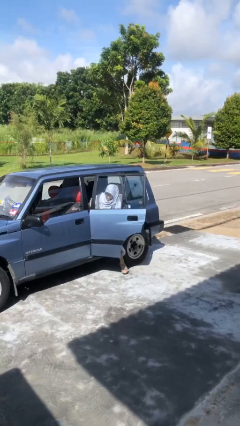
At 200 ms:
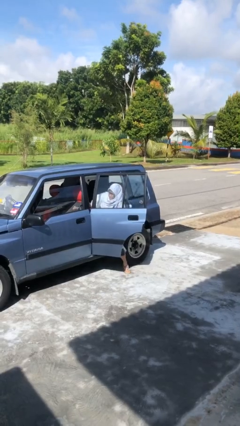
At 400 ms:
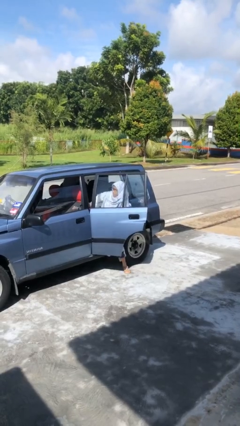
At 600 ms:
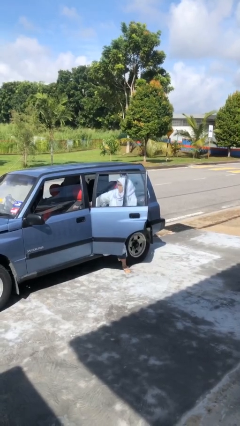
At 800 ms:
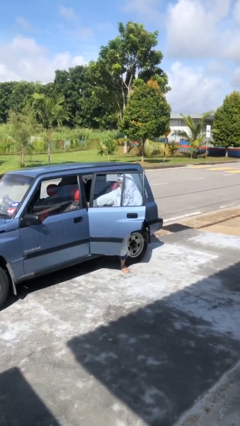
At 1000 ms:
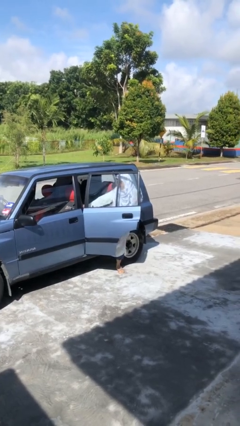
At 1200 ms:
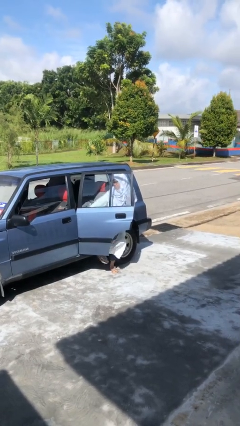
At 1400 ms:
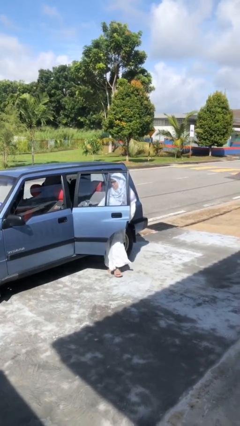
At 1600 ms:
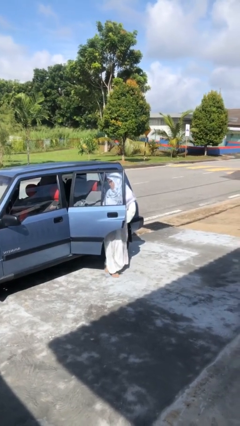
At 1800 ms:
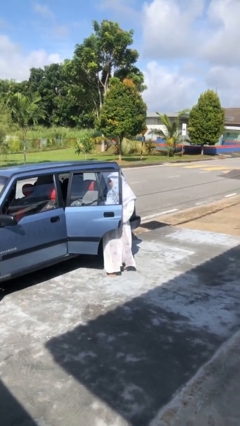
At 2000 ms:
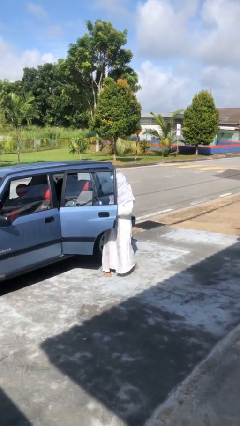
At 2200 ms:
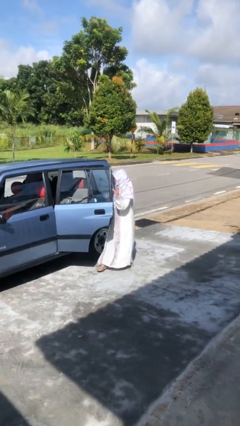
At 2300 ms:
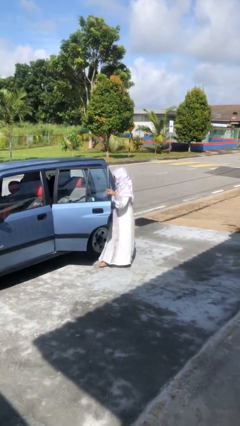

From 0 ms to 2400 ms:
person exits car

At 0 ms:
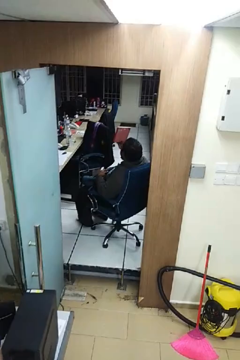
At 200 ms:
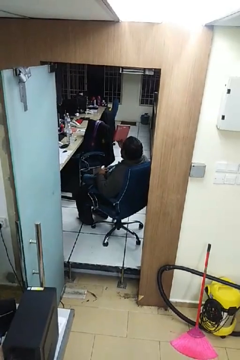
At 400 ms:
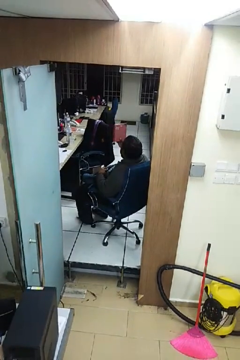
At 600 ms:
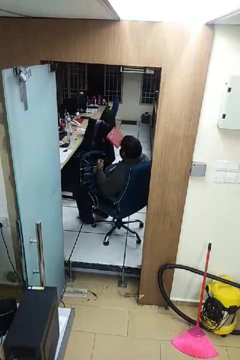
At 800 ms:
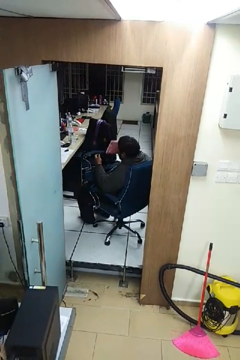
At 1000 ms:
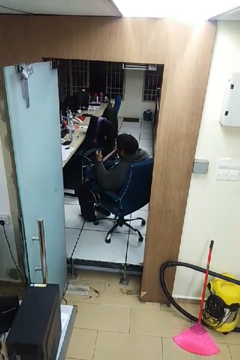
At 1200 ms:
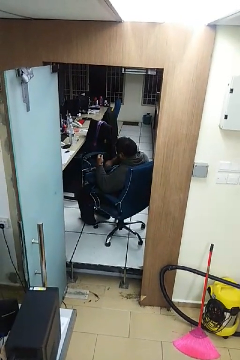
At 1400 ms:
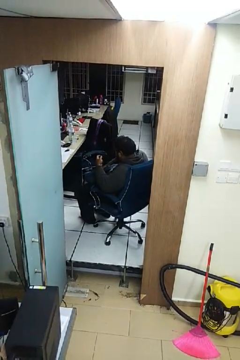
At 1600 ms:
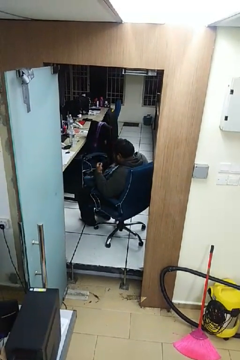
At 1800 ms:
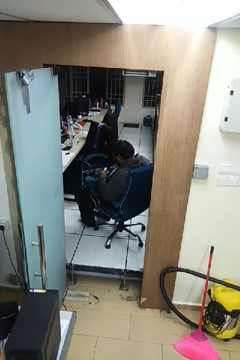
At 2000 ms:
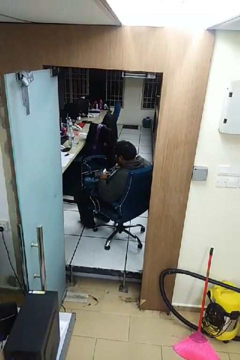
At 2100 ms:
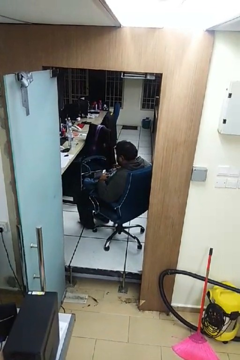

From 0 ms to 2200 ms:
person puts object into backpack

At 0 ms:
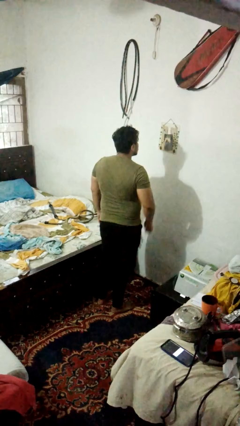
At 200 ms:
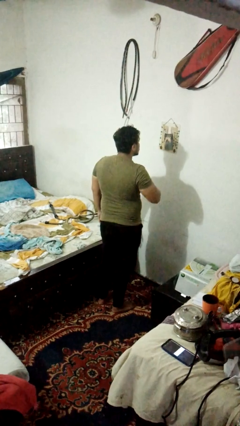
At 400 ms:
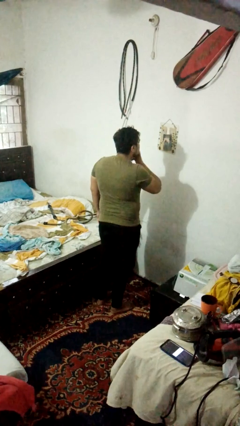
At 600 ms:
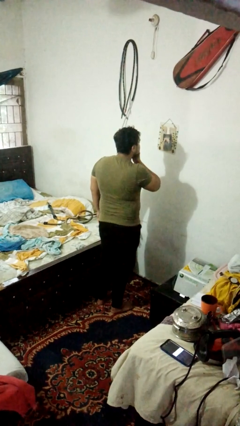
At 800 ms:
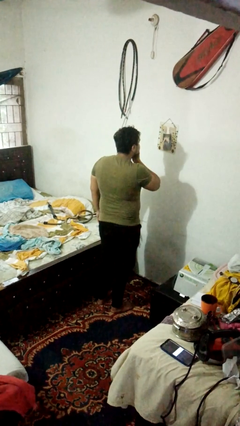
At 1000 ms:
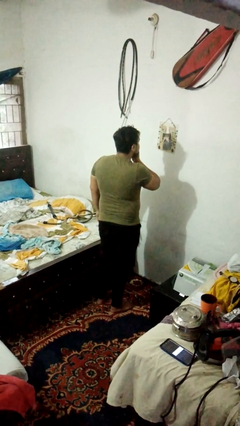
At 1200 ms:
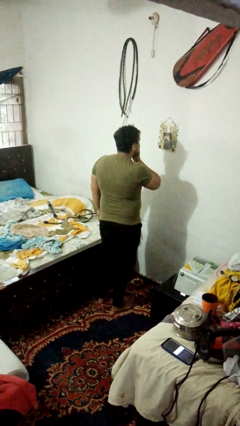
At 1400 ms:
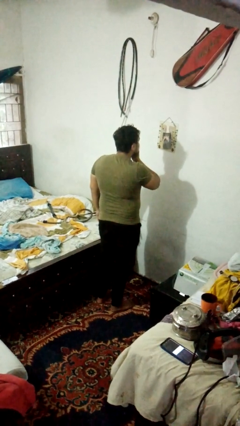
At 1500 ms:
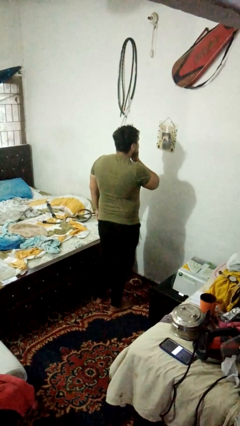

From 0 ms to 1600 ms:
person strokes chin

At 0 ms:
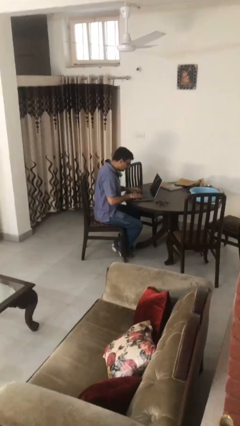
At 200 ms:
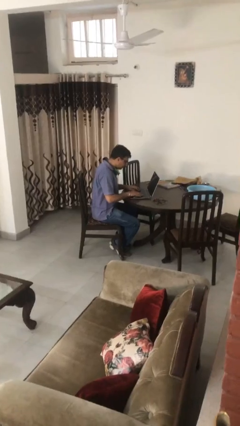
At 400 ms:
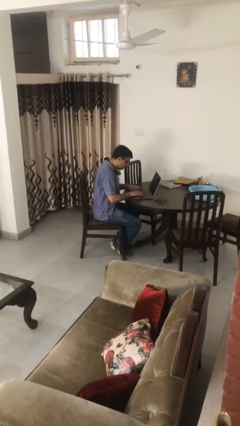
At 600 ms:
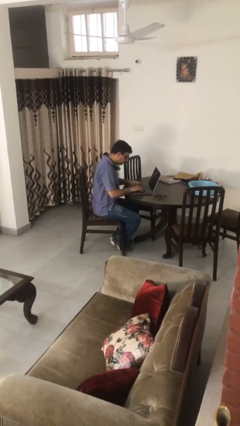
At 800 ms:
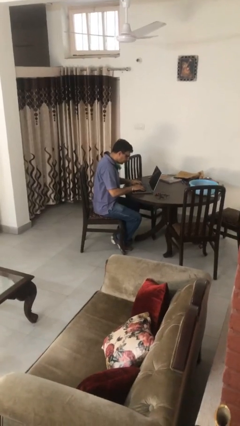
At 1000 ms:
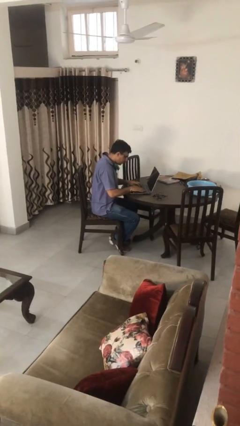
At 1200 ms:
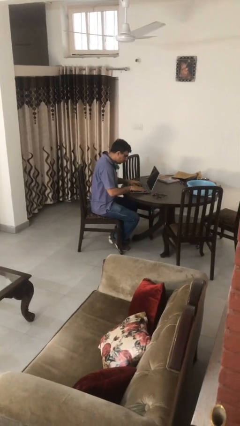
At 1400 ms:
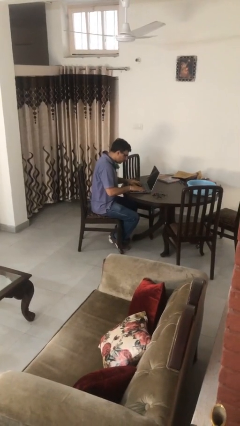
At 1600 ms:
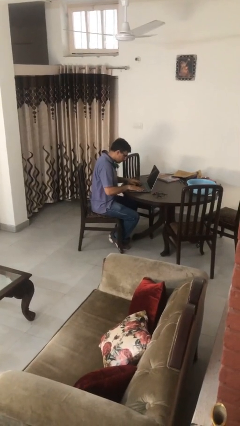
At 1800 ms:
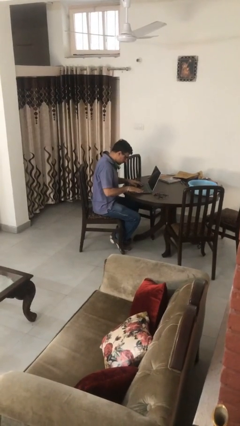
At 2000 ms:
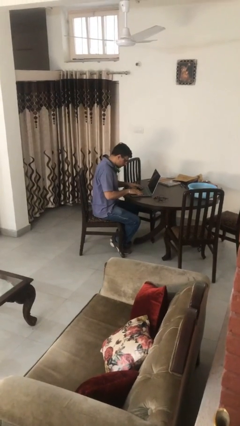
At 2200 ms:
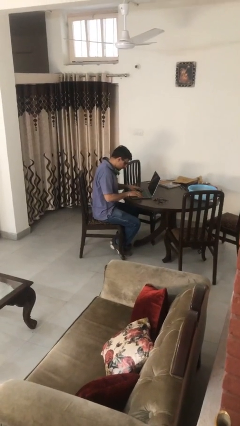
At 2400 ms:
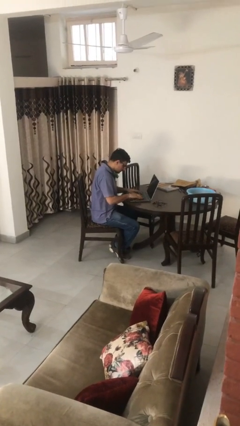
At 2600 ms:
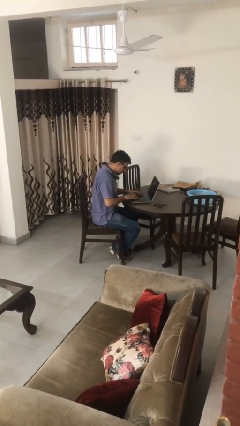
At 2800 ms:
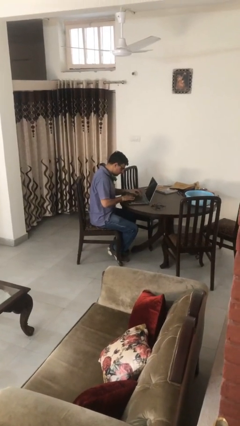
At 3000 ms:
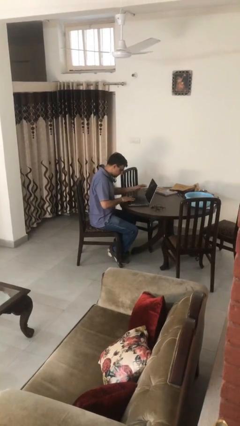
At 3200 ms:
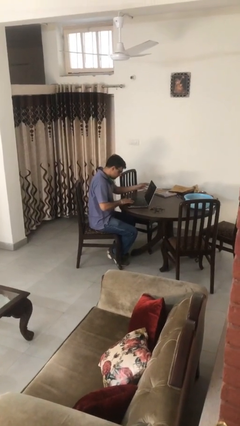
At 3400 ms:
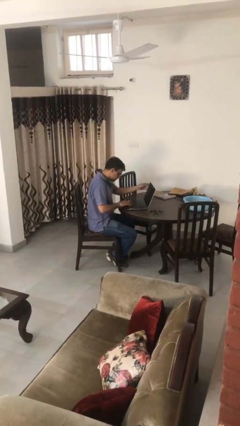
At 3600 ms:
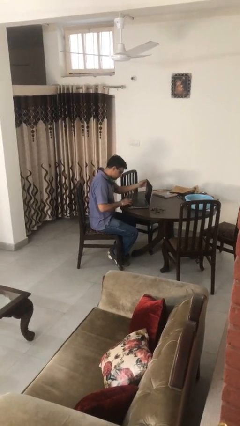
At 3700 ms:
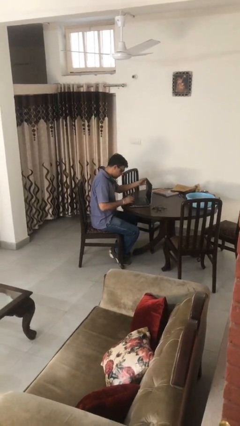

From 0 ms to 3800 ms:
person interacts with laptop

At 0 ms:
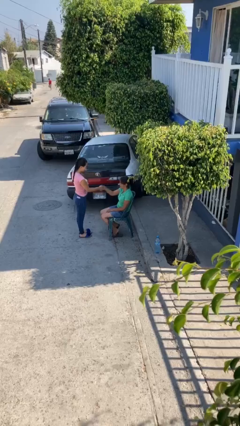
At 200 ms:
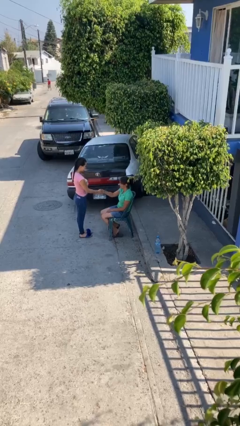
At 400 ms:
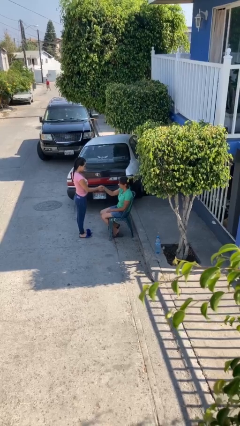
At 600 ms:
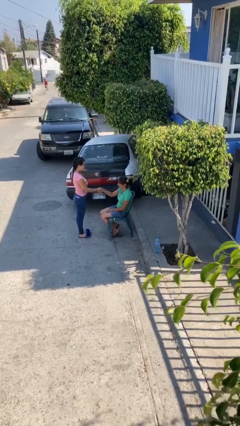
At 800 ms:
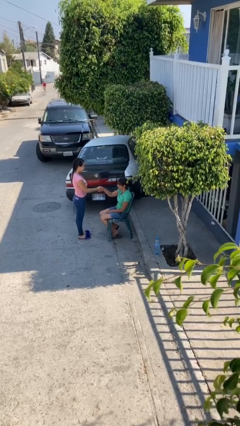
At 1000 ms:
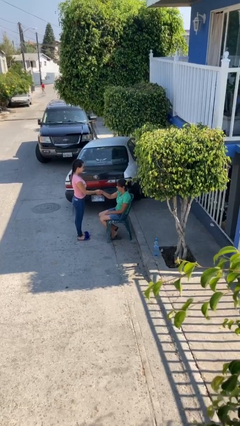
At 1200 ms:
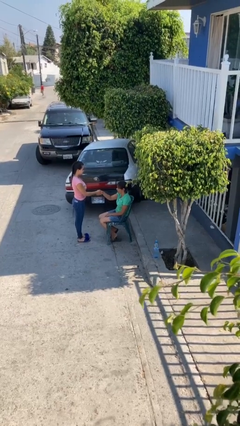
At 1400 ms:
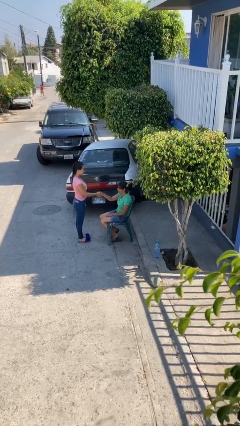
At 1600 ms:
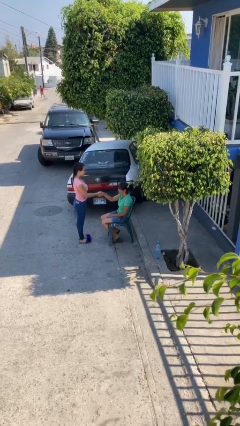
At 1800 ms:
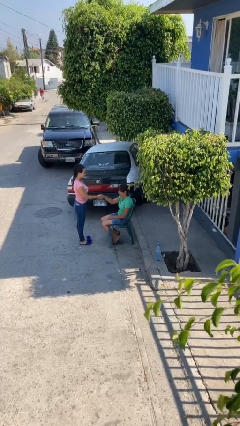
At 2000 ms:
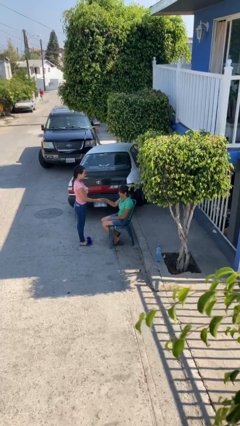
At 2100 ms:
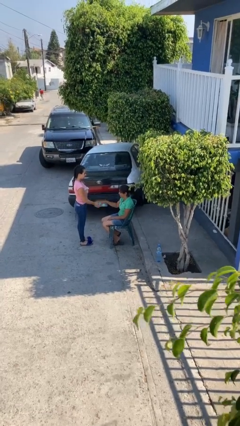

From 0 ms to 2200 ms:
person shakes hand

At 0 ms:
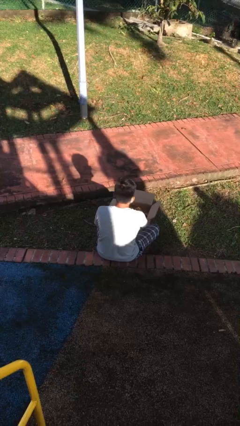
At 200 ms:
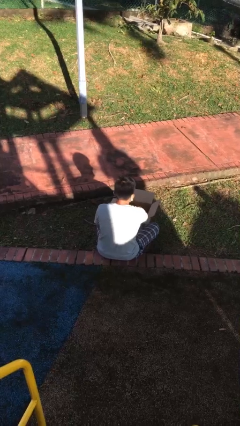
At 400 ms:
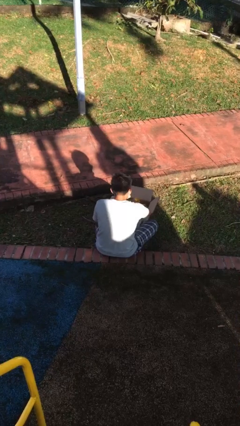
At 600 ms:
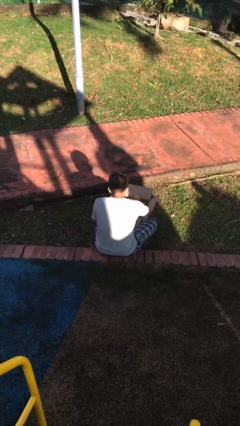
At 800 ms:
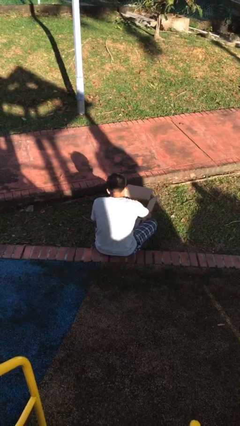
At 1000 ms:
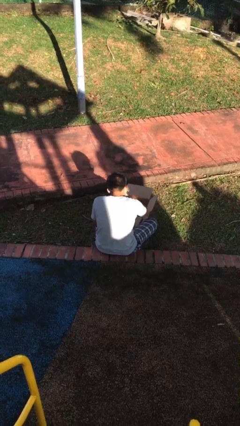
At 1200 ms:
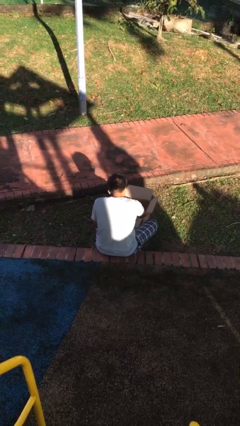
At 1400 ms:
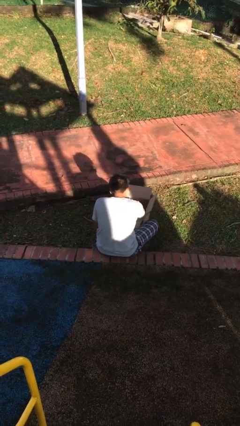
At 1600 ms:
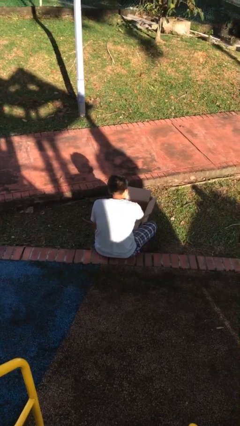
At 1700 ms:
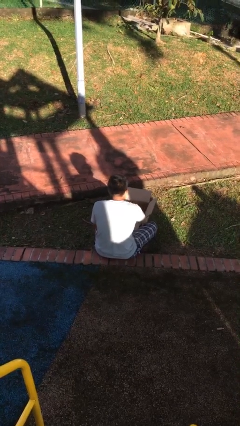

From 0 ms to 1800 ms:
person searches in box

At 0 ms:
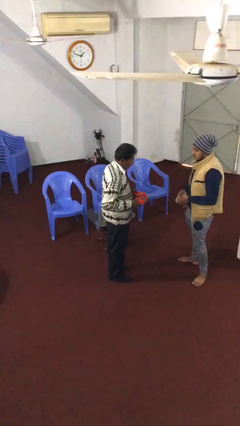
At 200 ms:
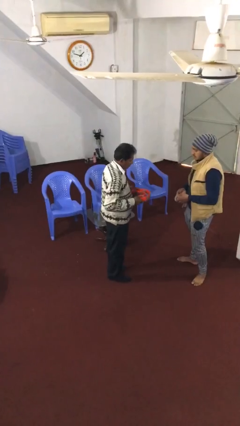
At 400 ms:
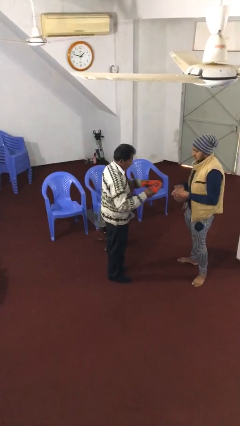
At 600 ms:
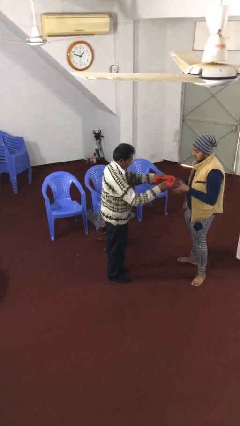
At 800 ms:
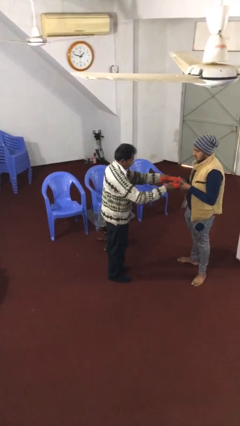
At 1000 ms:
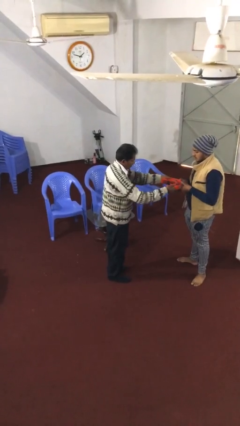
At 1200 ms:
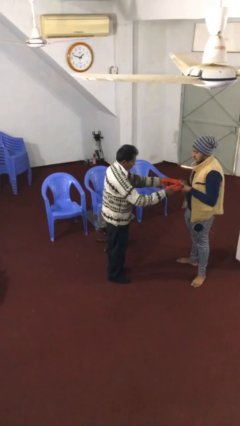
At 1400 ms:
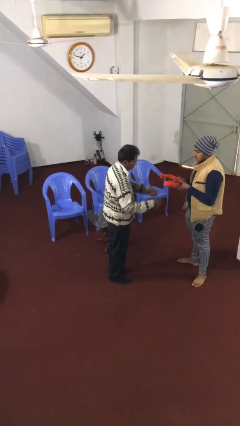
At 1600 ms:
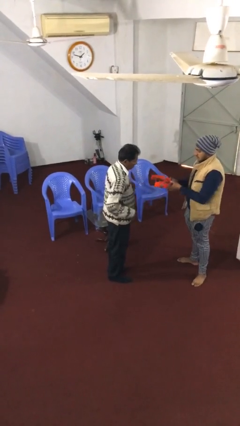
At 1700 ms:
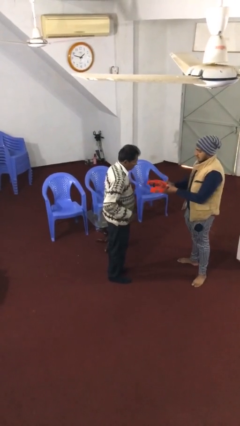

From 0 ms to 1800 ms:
person transfers object to person

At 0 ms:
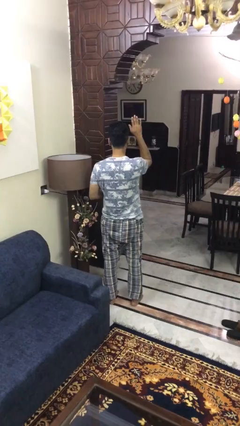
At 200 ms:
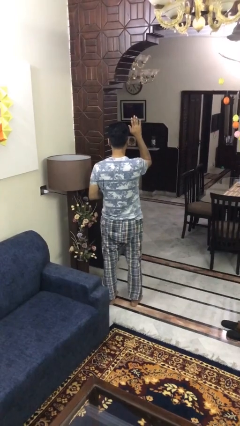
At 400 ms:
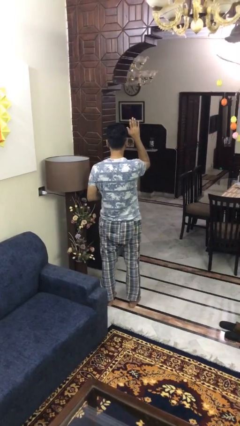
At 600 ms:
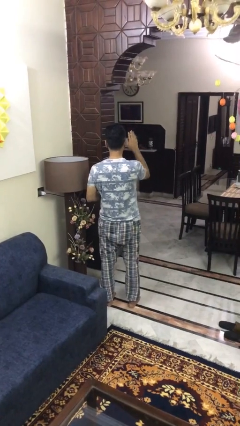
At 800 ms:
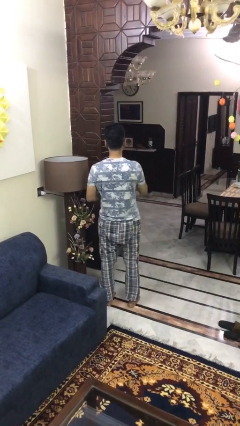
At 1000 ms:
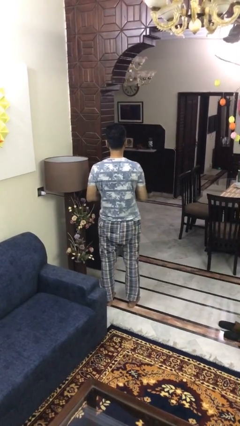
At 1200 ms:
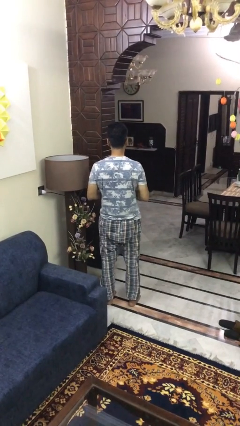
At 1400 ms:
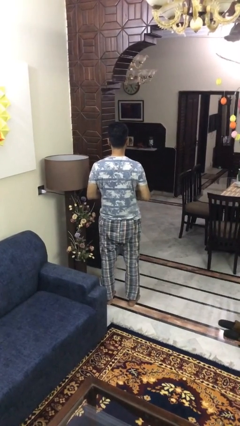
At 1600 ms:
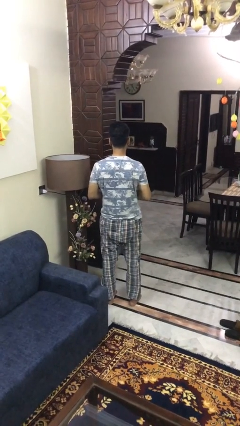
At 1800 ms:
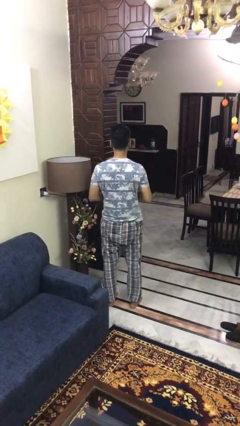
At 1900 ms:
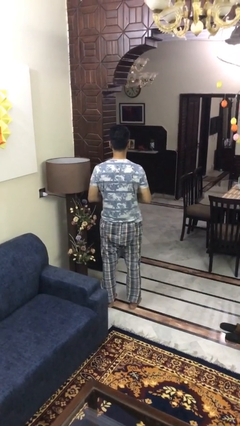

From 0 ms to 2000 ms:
person gestures lower hand
